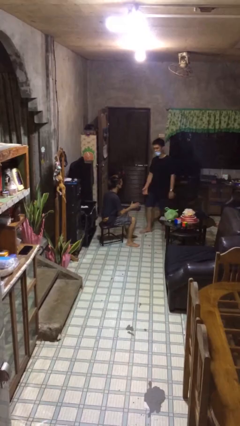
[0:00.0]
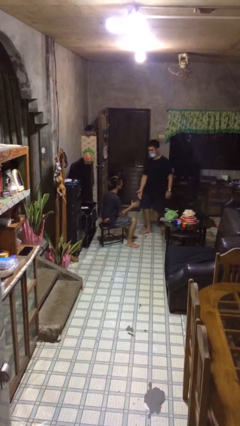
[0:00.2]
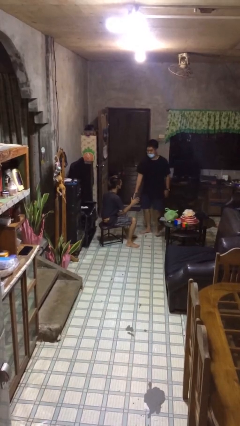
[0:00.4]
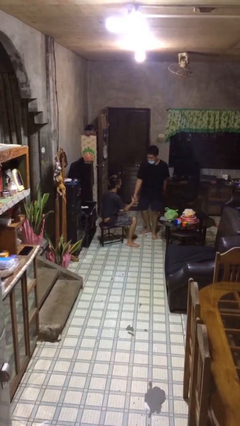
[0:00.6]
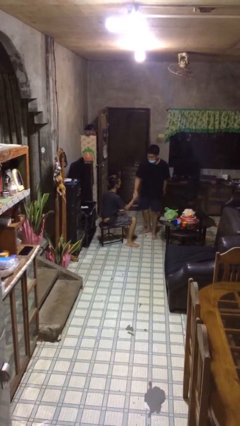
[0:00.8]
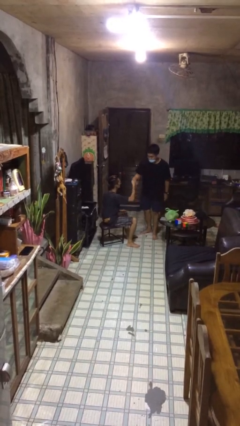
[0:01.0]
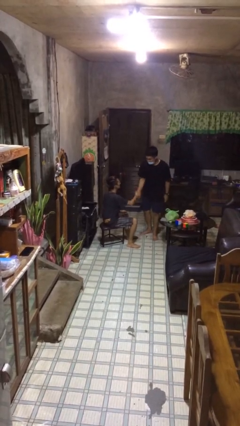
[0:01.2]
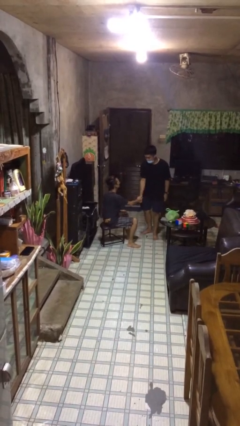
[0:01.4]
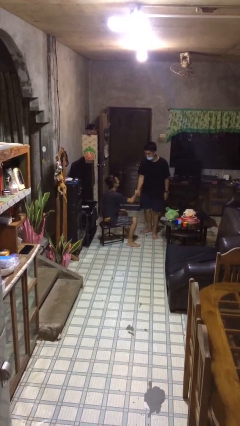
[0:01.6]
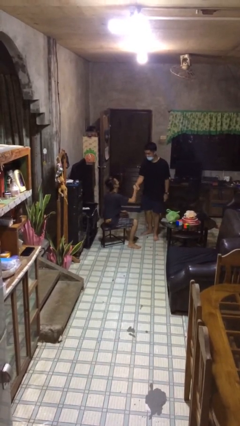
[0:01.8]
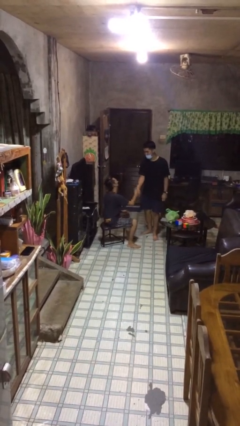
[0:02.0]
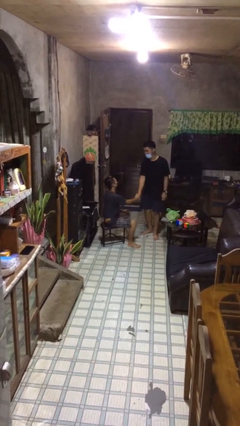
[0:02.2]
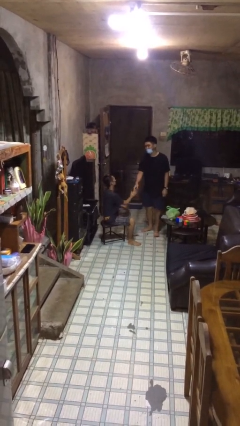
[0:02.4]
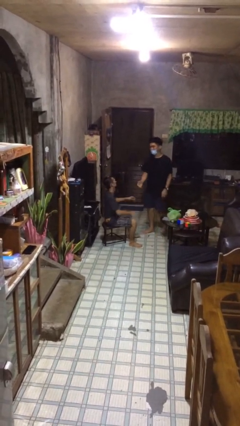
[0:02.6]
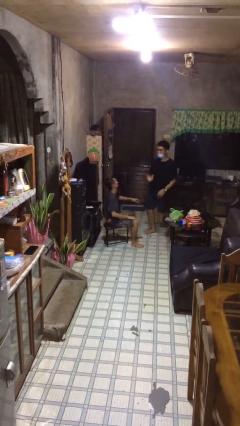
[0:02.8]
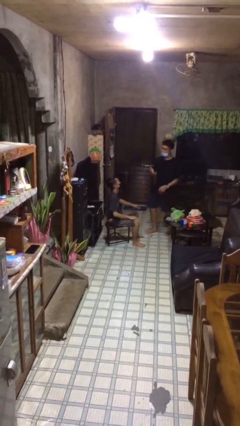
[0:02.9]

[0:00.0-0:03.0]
person shakes hand

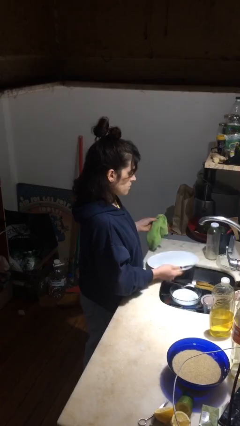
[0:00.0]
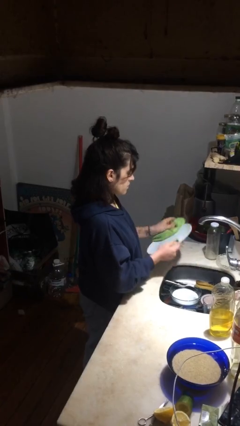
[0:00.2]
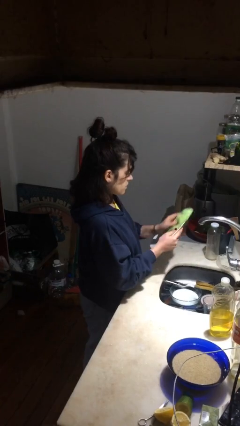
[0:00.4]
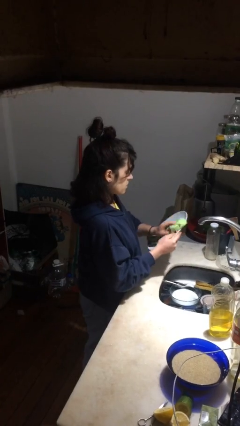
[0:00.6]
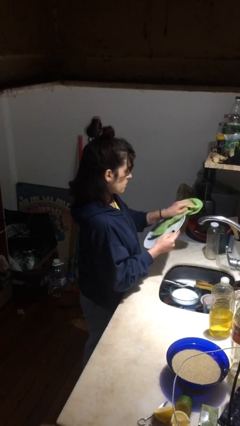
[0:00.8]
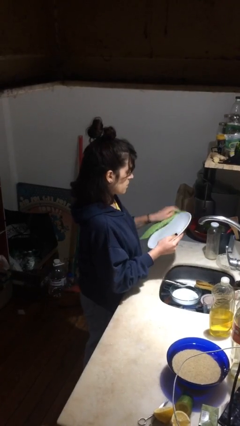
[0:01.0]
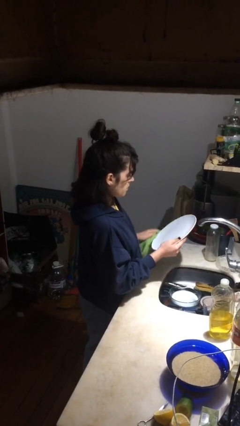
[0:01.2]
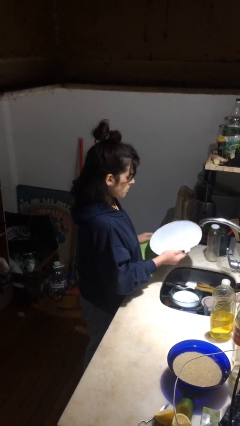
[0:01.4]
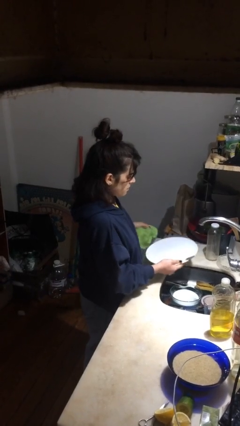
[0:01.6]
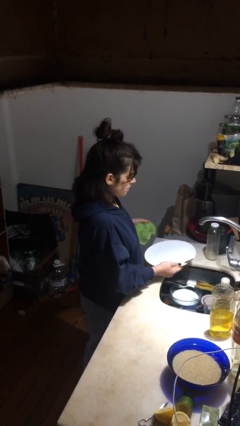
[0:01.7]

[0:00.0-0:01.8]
person dries dish

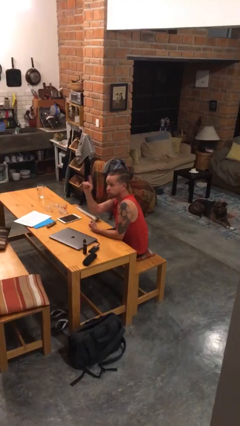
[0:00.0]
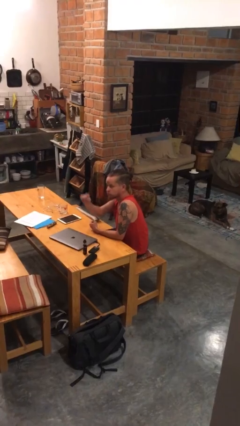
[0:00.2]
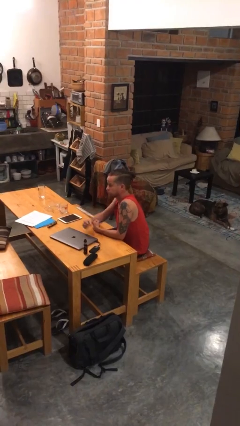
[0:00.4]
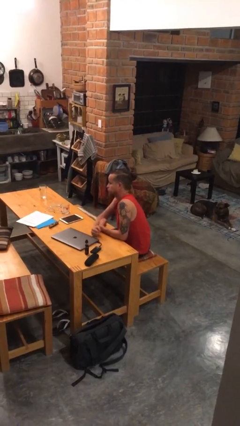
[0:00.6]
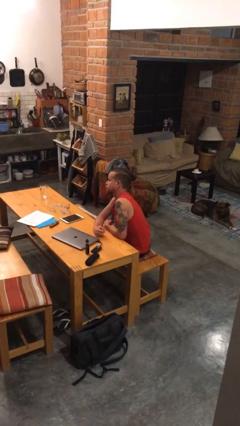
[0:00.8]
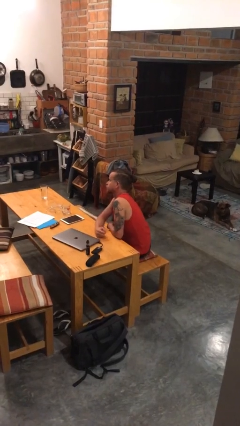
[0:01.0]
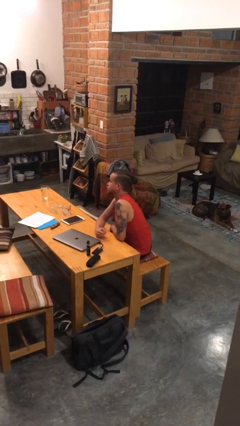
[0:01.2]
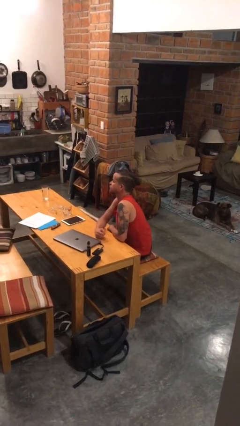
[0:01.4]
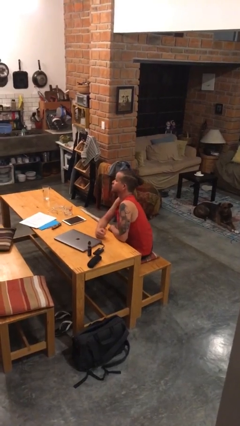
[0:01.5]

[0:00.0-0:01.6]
person gestures lower hand

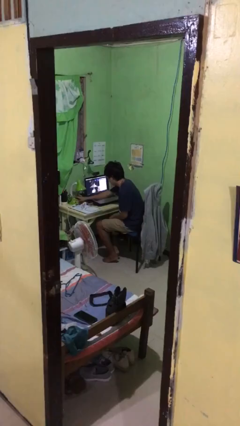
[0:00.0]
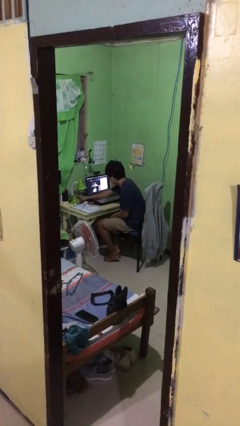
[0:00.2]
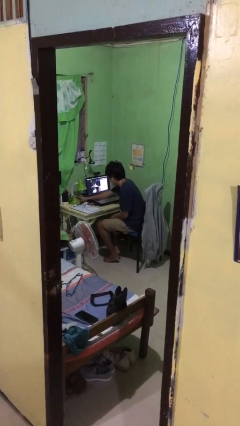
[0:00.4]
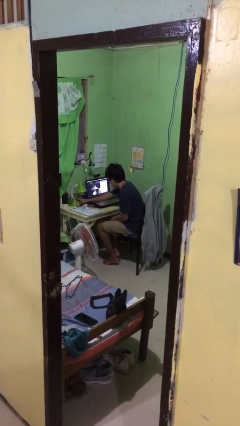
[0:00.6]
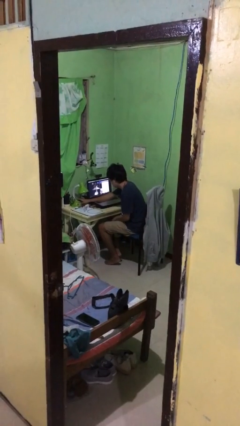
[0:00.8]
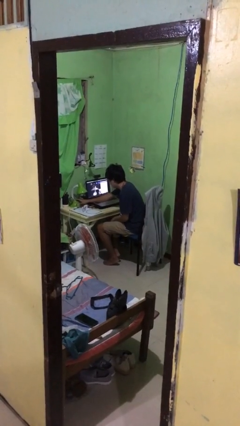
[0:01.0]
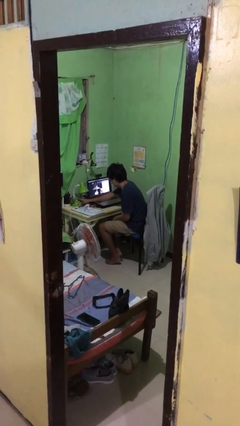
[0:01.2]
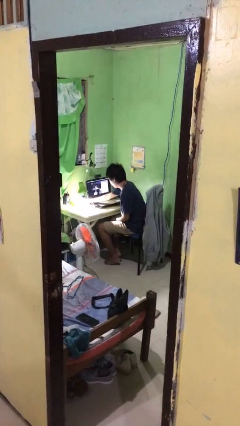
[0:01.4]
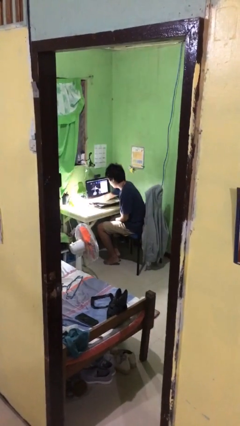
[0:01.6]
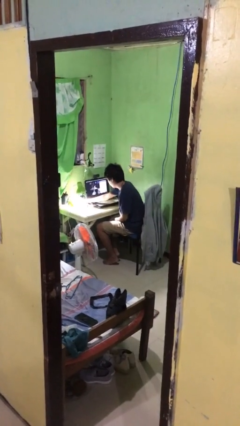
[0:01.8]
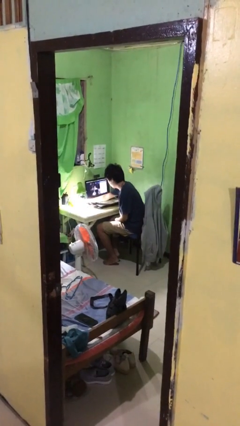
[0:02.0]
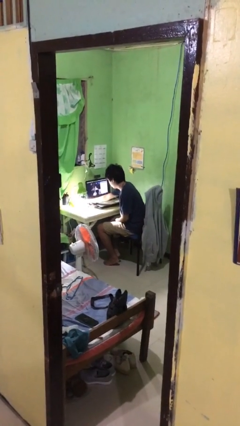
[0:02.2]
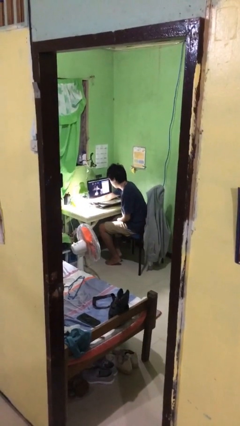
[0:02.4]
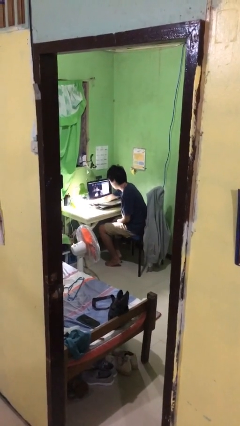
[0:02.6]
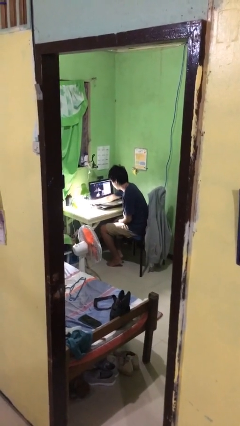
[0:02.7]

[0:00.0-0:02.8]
person turns on lamp

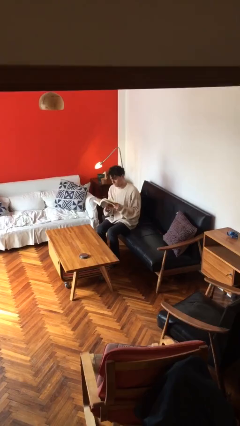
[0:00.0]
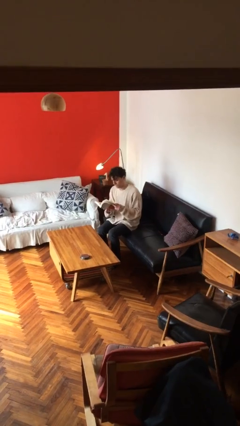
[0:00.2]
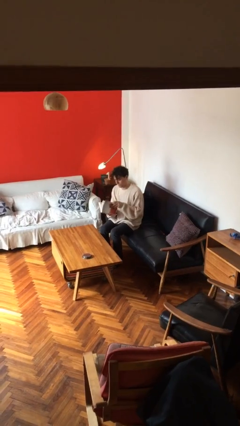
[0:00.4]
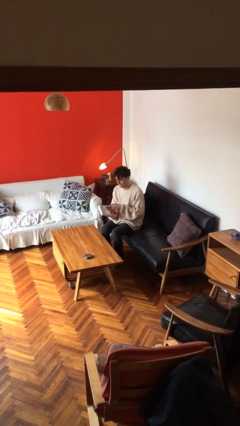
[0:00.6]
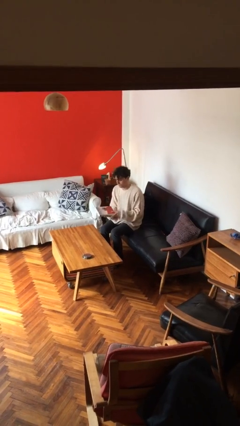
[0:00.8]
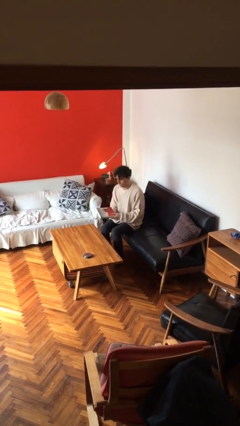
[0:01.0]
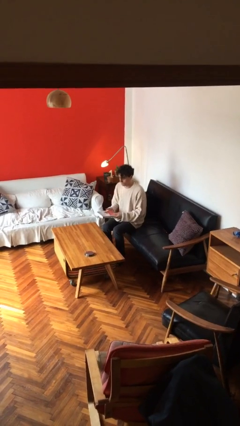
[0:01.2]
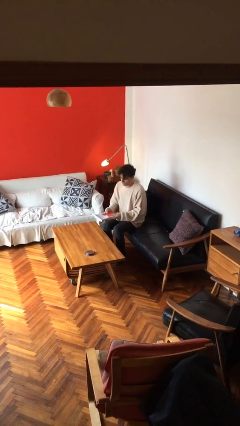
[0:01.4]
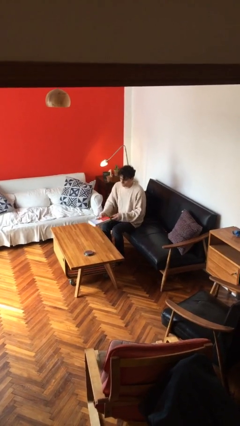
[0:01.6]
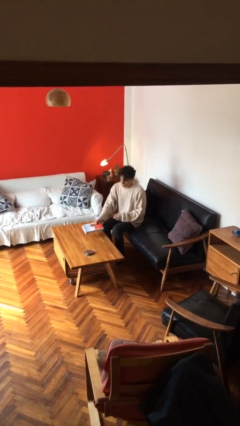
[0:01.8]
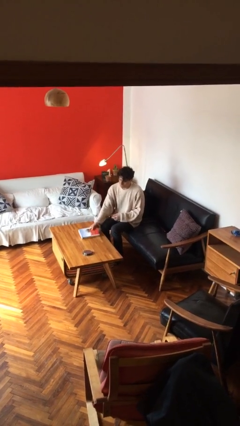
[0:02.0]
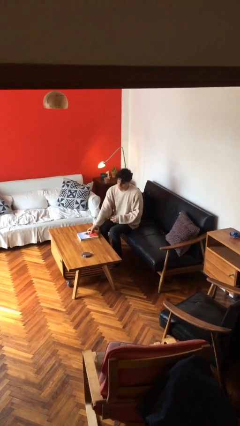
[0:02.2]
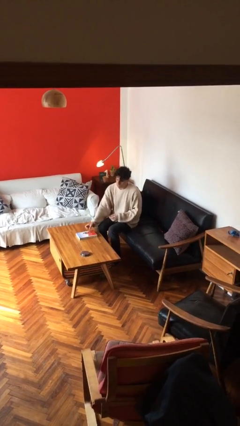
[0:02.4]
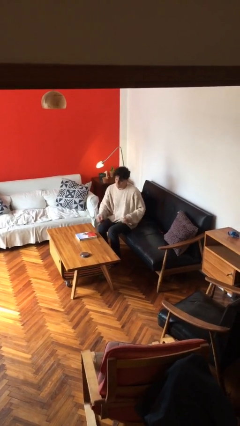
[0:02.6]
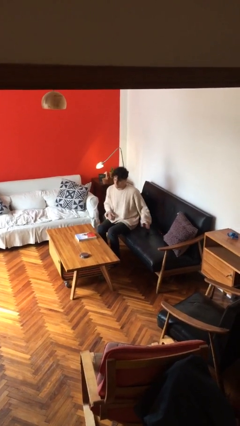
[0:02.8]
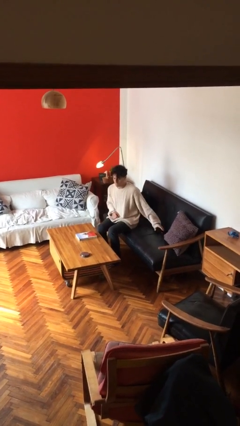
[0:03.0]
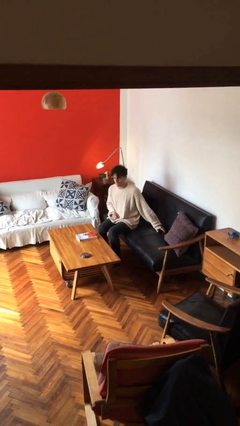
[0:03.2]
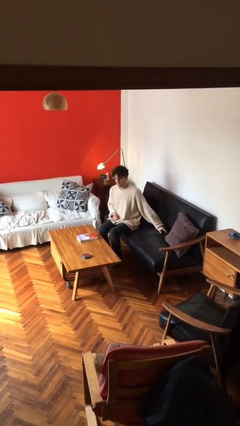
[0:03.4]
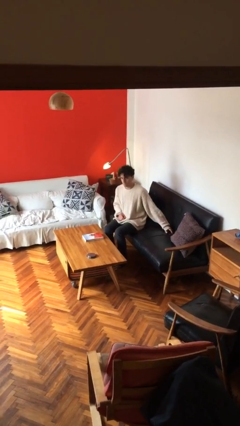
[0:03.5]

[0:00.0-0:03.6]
person puts down object on table

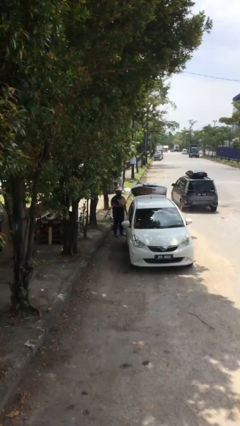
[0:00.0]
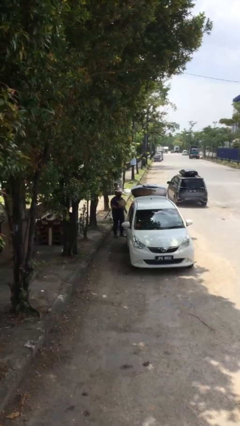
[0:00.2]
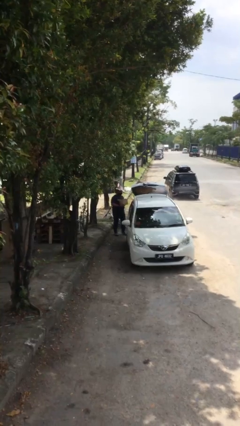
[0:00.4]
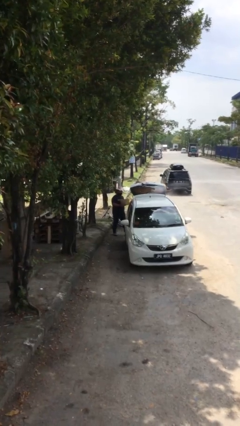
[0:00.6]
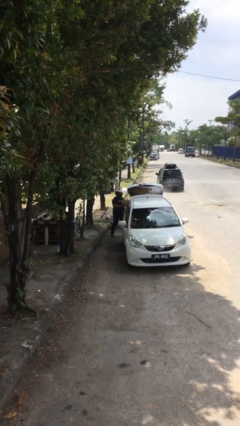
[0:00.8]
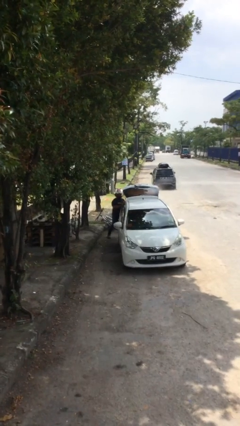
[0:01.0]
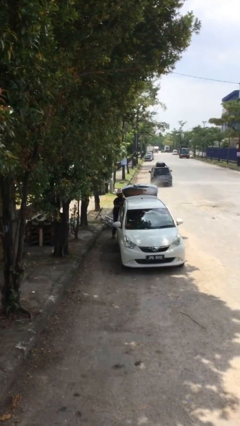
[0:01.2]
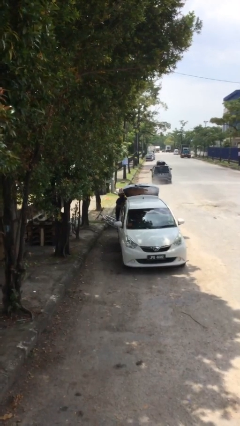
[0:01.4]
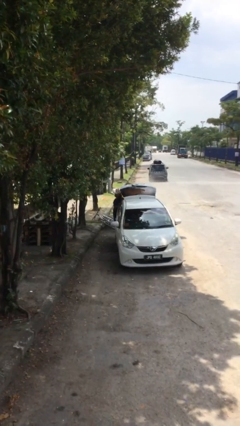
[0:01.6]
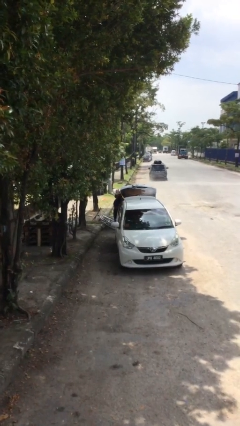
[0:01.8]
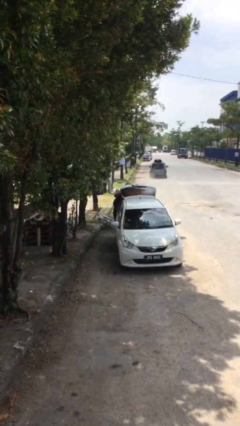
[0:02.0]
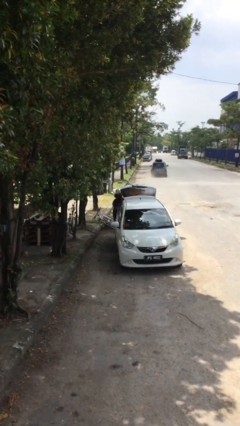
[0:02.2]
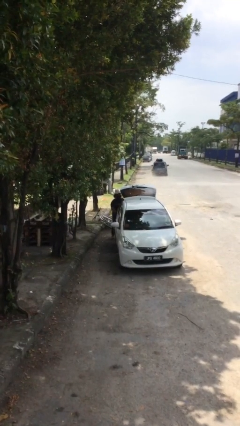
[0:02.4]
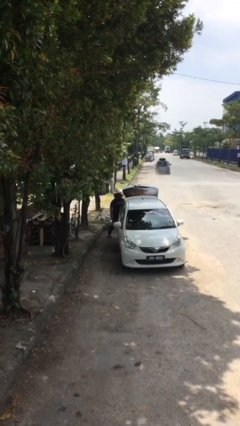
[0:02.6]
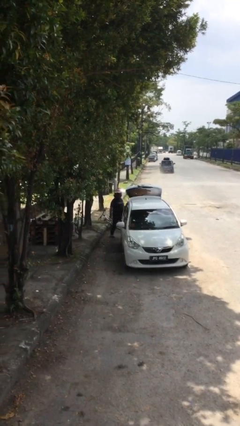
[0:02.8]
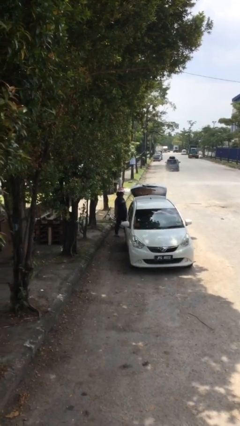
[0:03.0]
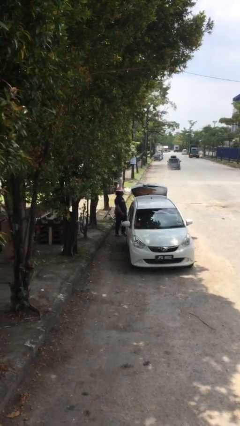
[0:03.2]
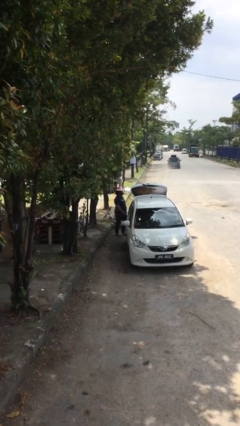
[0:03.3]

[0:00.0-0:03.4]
person loads car

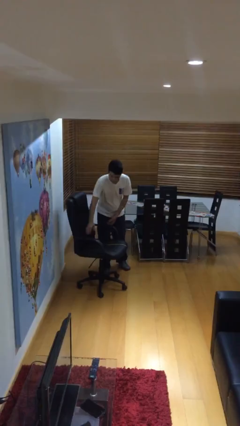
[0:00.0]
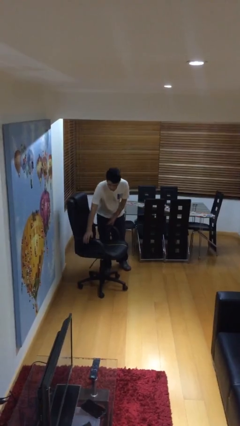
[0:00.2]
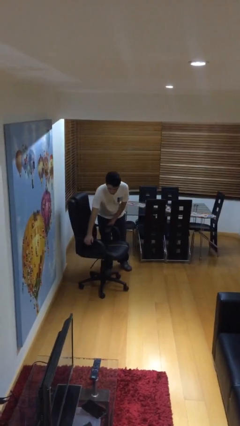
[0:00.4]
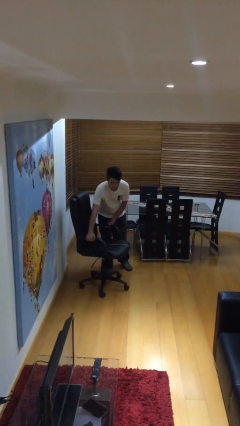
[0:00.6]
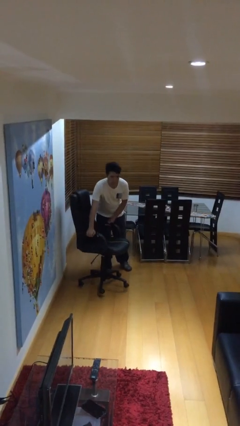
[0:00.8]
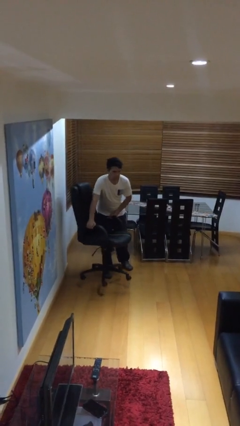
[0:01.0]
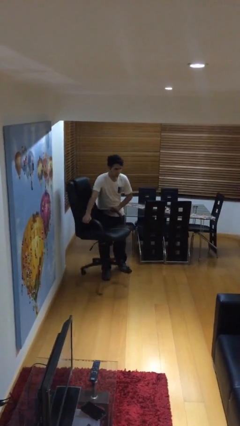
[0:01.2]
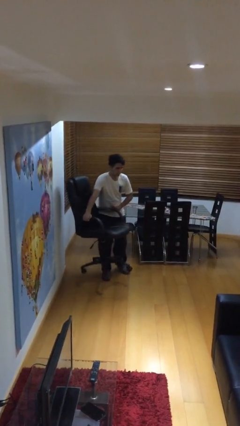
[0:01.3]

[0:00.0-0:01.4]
person picks up object from floor
